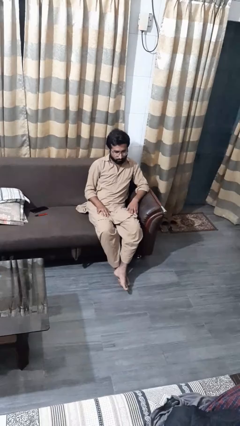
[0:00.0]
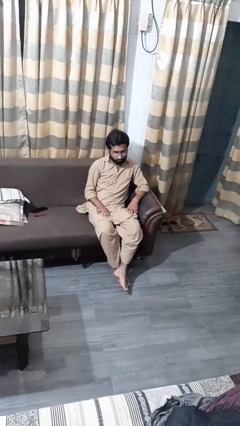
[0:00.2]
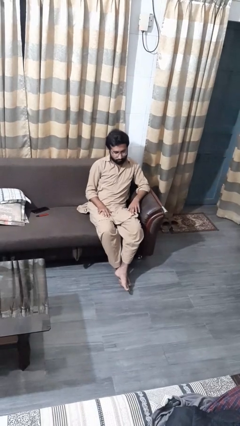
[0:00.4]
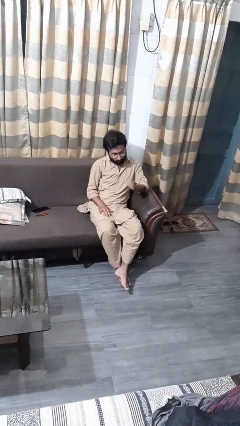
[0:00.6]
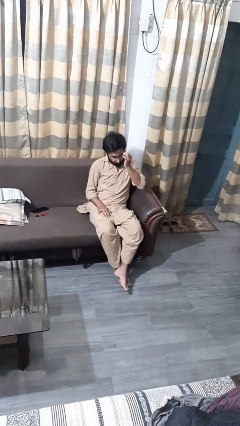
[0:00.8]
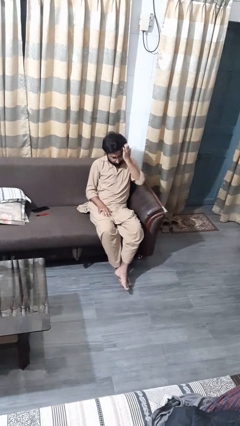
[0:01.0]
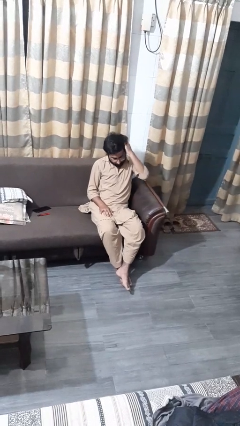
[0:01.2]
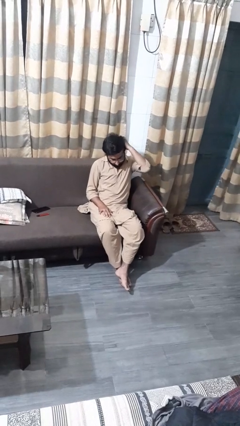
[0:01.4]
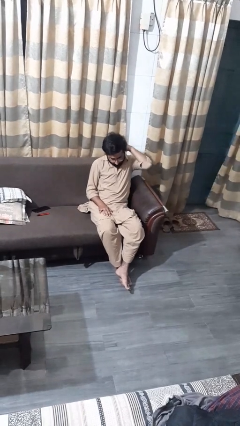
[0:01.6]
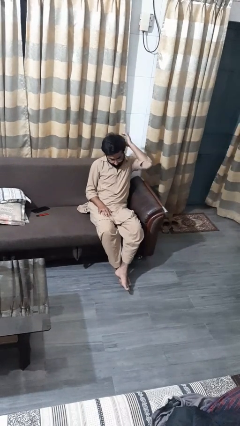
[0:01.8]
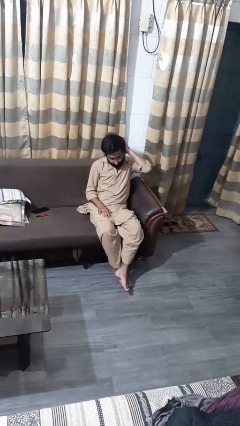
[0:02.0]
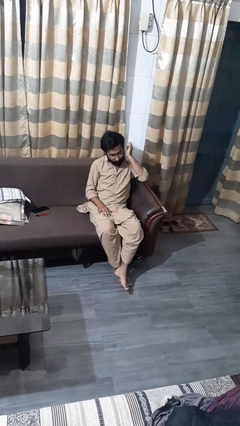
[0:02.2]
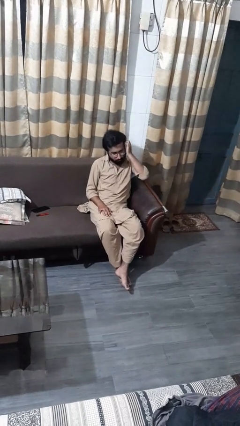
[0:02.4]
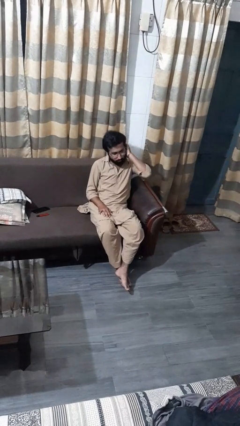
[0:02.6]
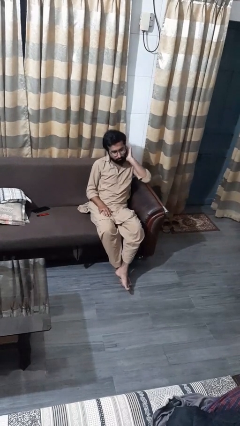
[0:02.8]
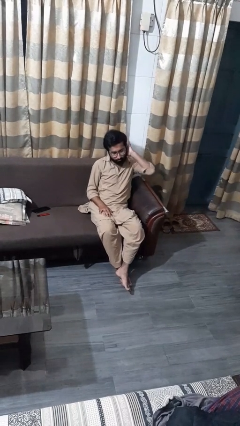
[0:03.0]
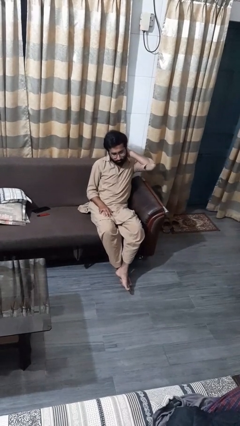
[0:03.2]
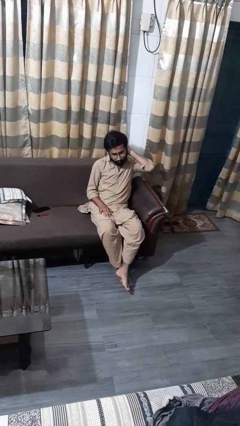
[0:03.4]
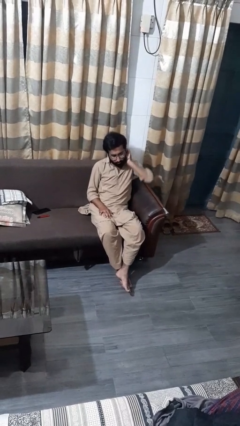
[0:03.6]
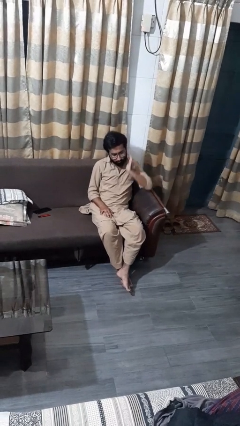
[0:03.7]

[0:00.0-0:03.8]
person strokes hair

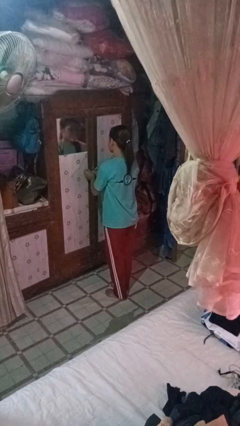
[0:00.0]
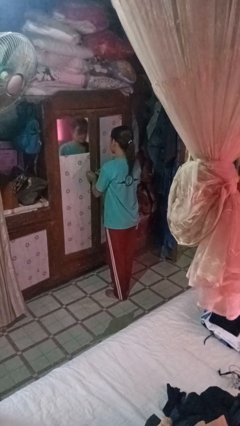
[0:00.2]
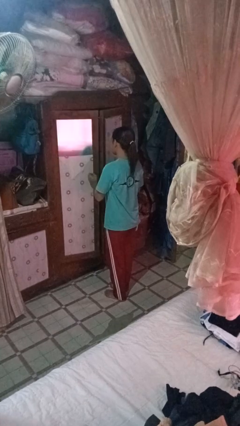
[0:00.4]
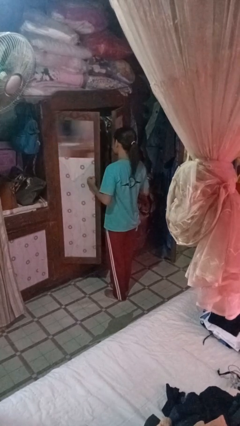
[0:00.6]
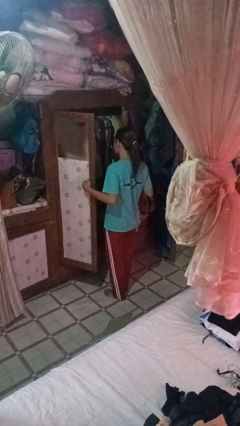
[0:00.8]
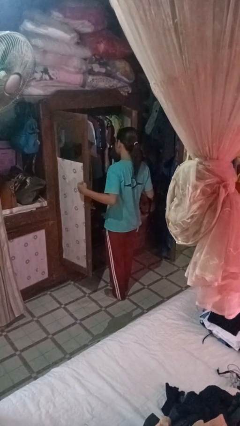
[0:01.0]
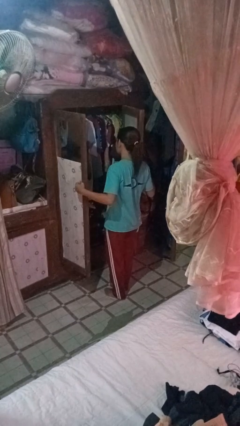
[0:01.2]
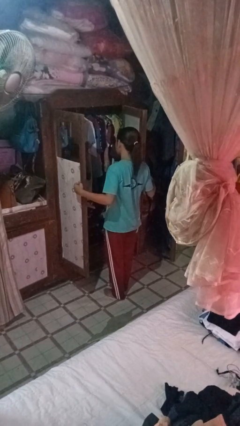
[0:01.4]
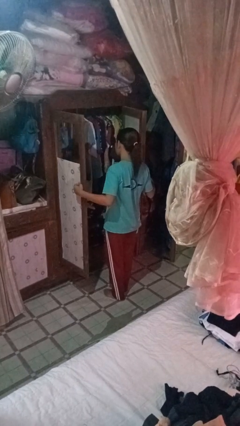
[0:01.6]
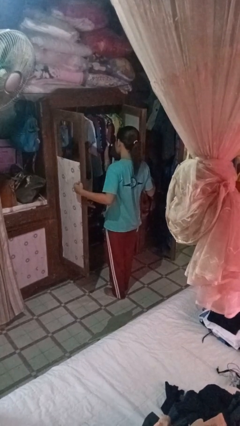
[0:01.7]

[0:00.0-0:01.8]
person opens closet door

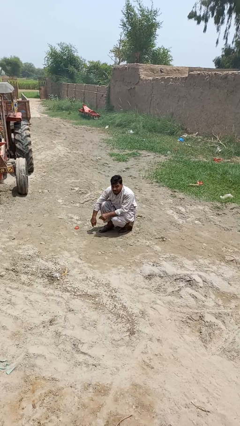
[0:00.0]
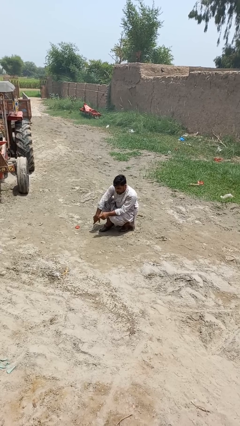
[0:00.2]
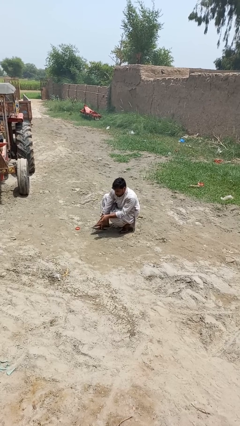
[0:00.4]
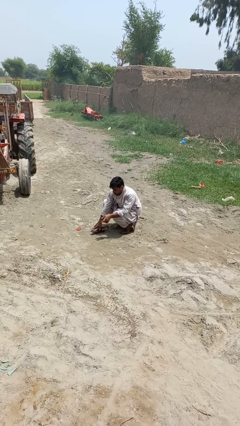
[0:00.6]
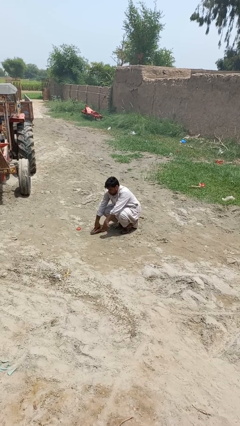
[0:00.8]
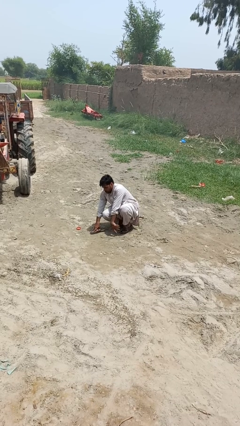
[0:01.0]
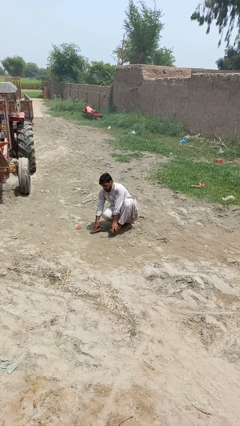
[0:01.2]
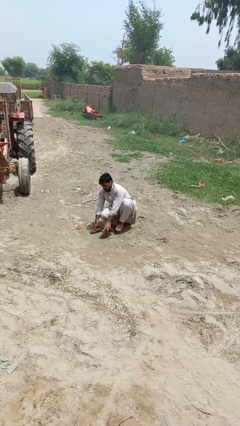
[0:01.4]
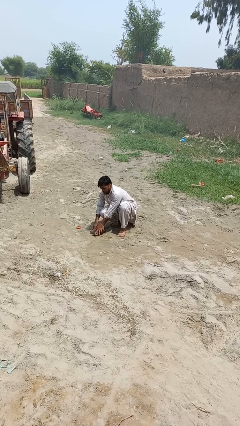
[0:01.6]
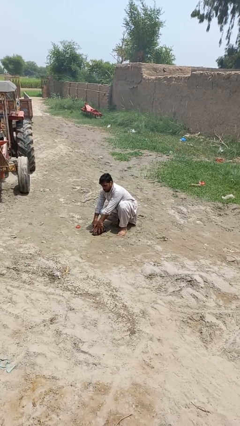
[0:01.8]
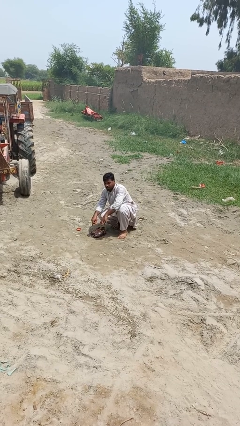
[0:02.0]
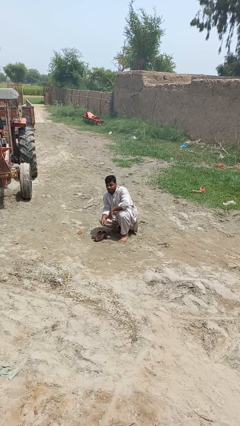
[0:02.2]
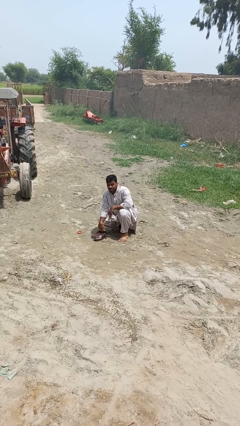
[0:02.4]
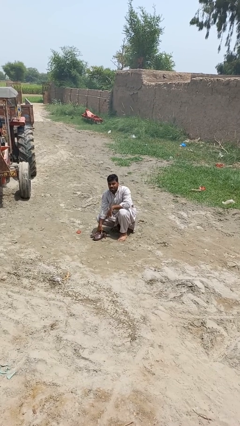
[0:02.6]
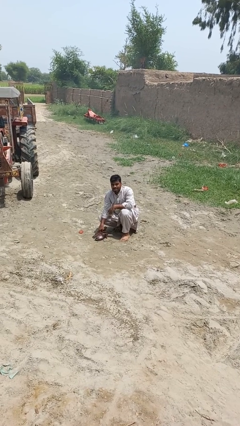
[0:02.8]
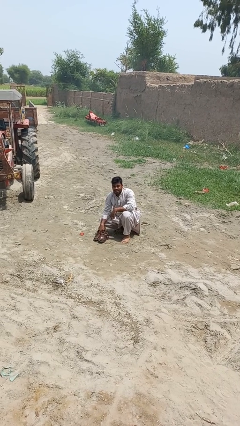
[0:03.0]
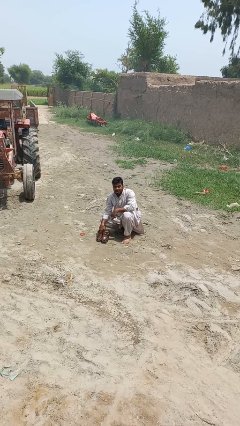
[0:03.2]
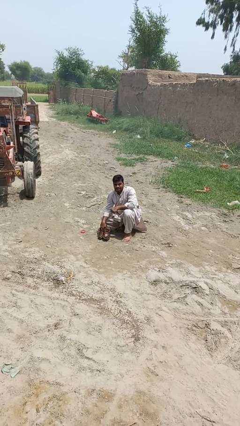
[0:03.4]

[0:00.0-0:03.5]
person takes off shoes

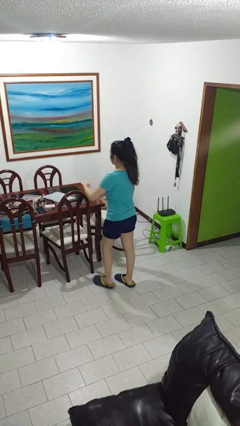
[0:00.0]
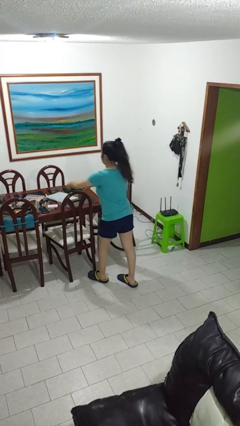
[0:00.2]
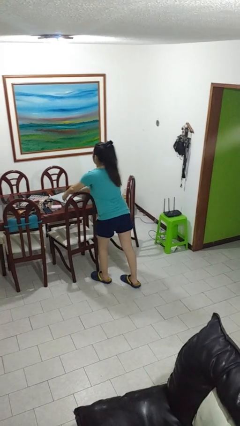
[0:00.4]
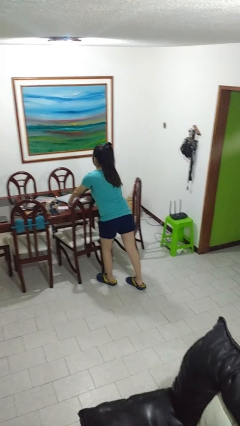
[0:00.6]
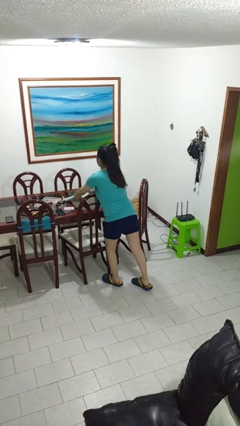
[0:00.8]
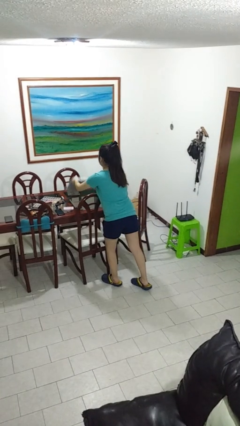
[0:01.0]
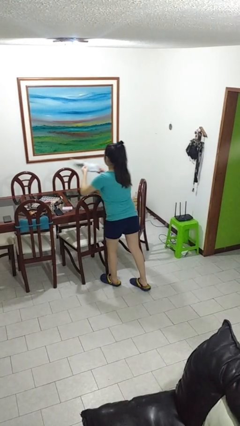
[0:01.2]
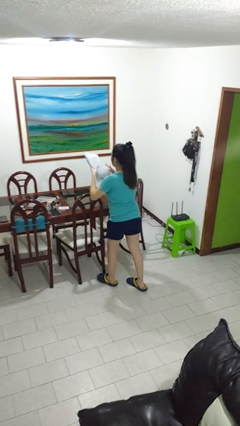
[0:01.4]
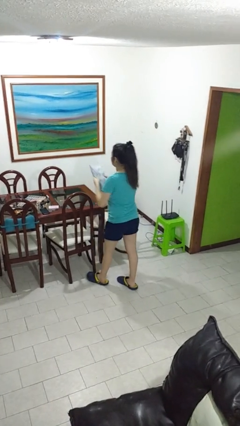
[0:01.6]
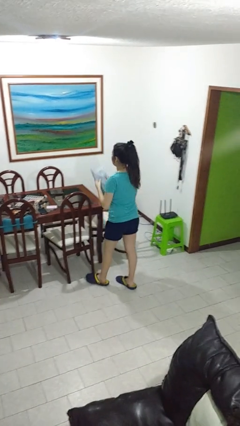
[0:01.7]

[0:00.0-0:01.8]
person picks up object from table

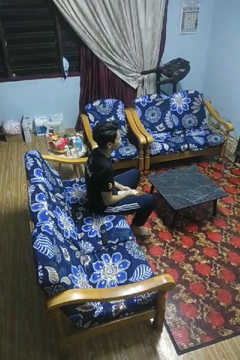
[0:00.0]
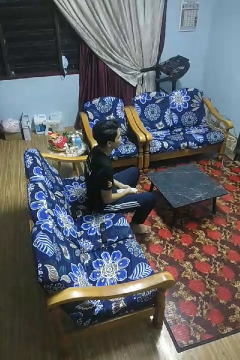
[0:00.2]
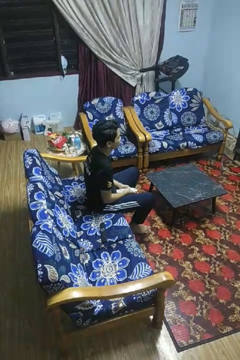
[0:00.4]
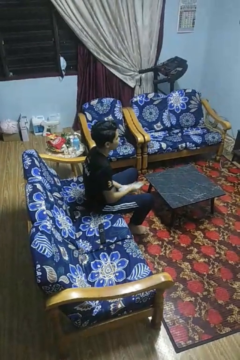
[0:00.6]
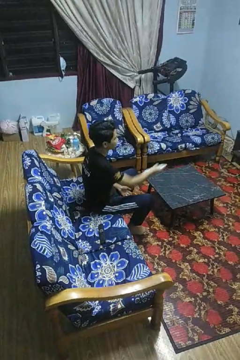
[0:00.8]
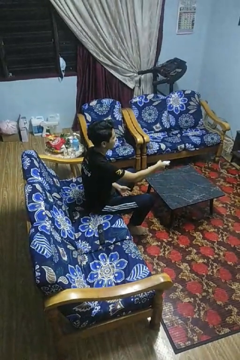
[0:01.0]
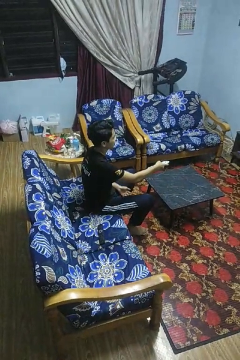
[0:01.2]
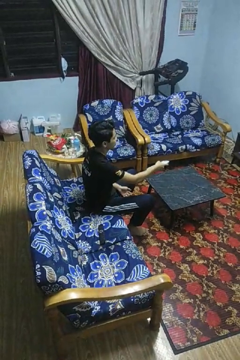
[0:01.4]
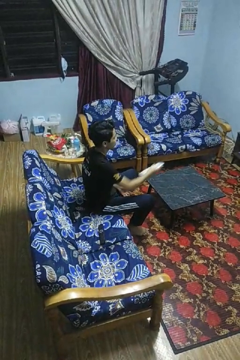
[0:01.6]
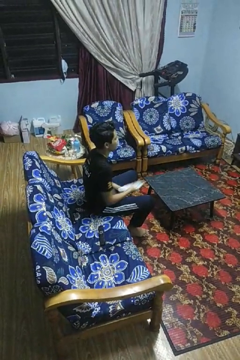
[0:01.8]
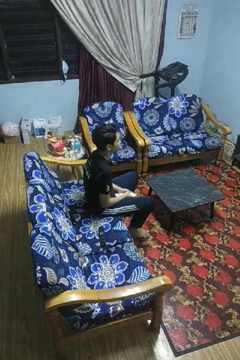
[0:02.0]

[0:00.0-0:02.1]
person uses television remote

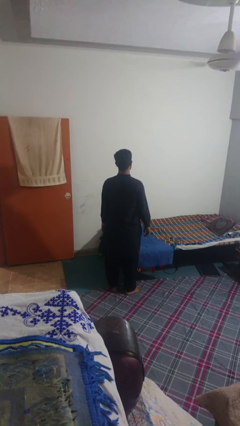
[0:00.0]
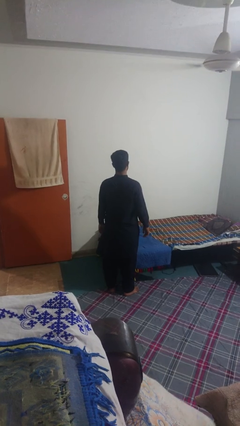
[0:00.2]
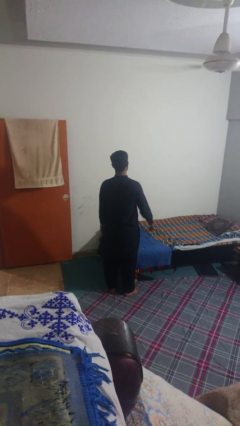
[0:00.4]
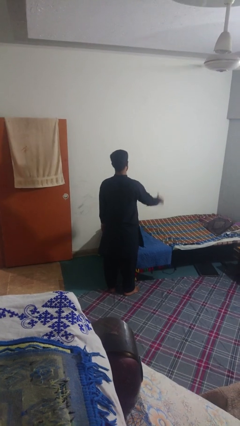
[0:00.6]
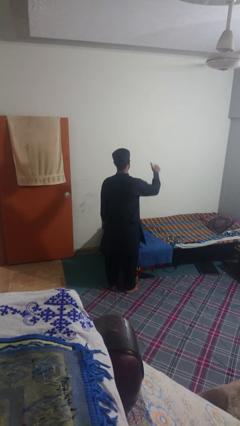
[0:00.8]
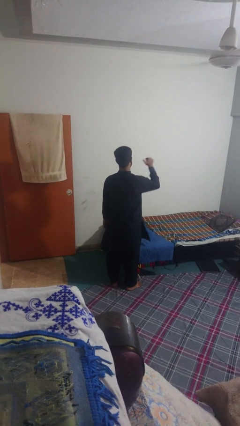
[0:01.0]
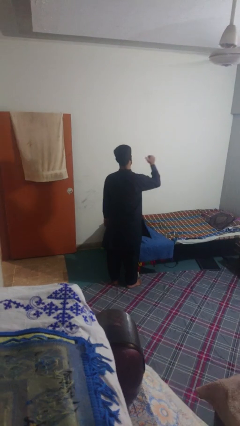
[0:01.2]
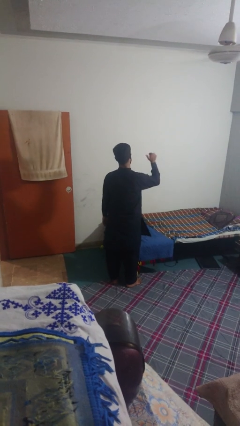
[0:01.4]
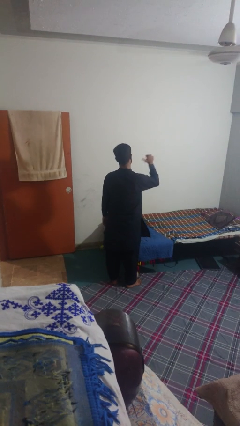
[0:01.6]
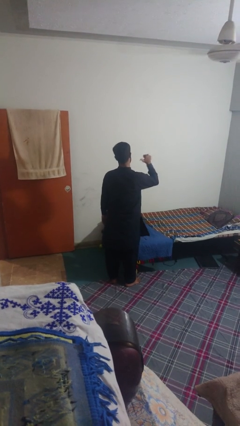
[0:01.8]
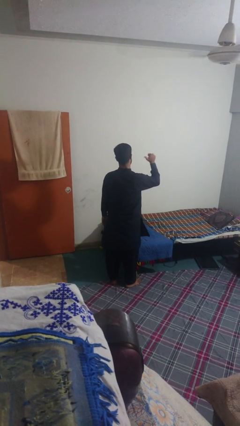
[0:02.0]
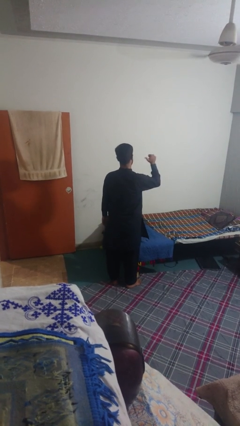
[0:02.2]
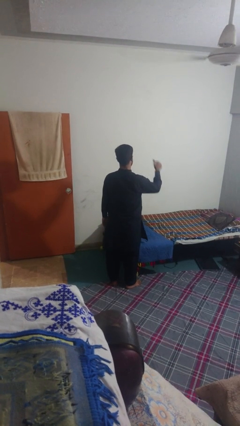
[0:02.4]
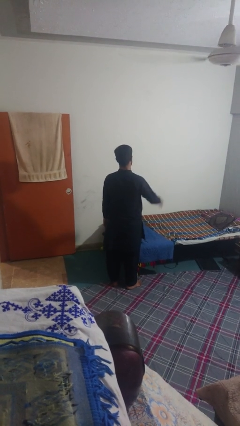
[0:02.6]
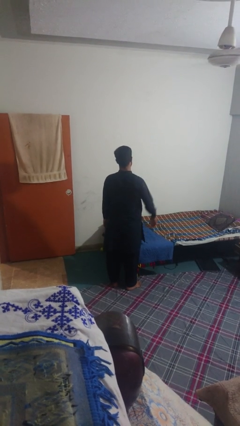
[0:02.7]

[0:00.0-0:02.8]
person gestures behind me

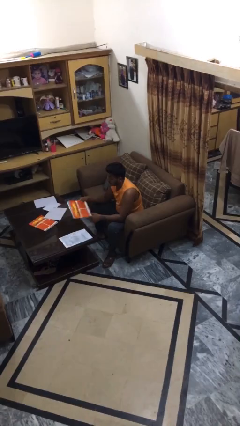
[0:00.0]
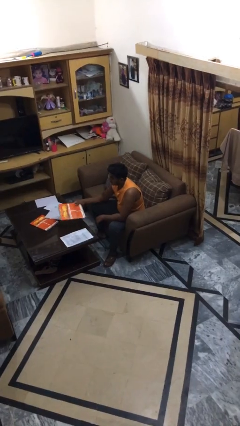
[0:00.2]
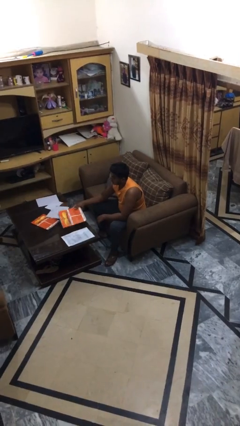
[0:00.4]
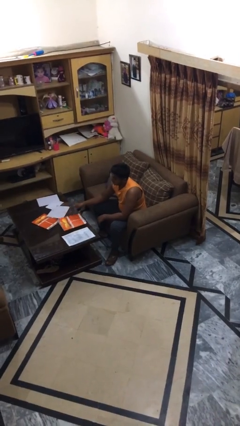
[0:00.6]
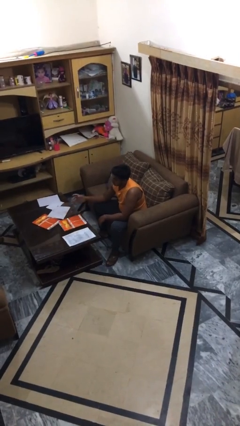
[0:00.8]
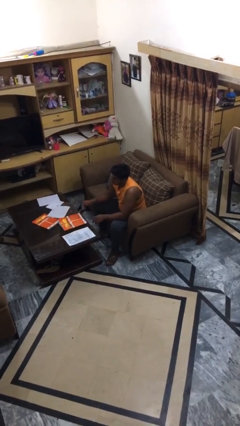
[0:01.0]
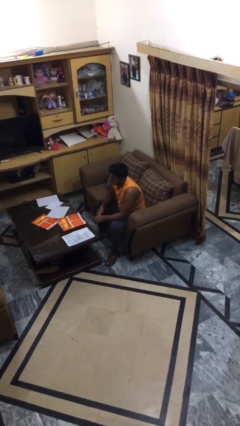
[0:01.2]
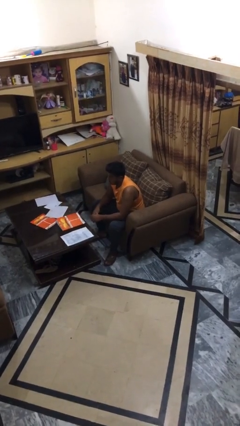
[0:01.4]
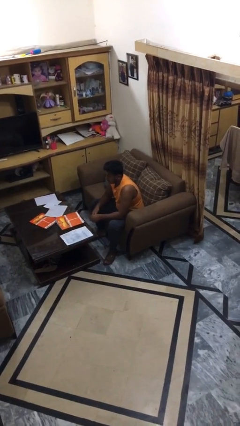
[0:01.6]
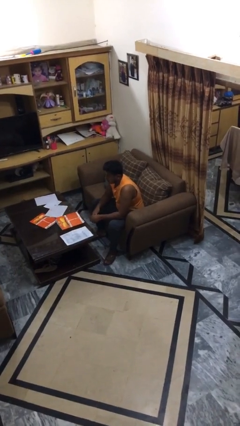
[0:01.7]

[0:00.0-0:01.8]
person puts down object on table
